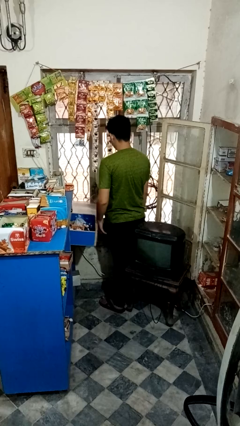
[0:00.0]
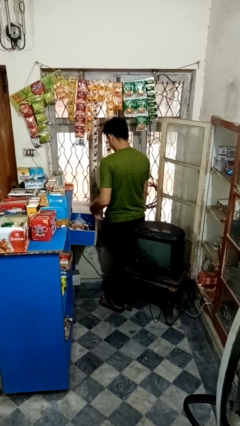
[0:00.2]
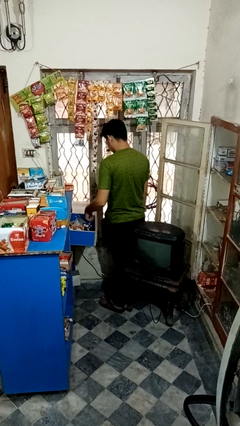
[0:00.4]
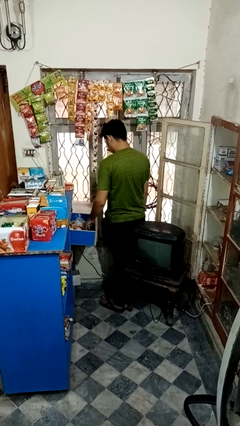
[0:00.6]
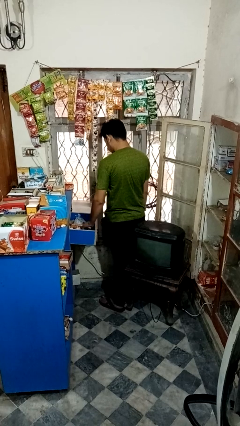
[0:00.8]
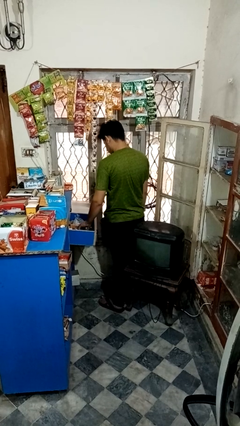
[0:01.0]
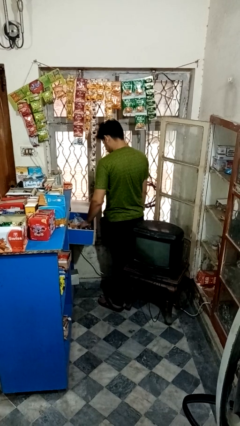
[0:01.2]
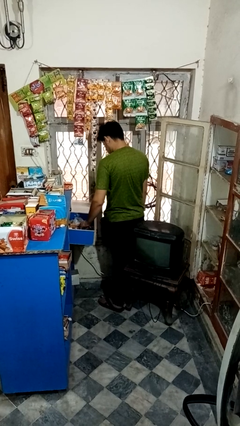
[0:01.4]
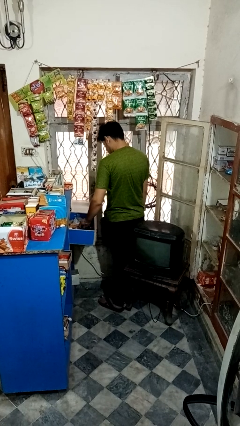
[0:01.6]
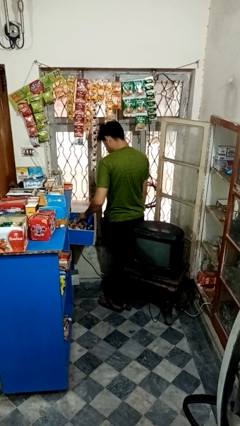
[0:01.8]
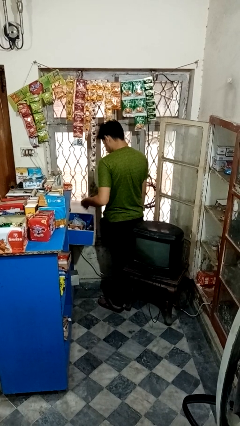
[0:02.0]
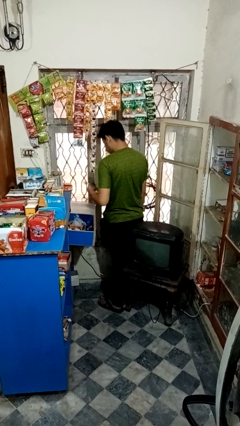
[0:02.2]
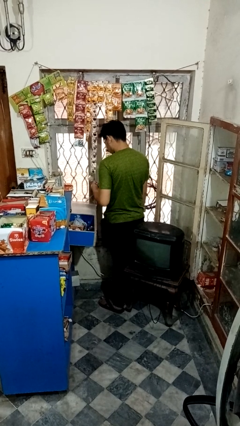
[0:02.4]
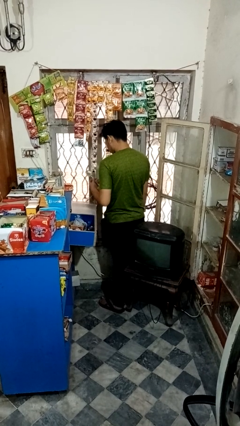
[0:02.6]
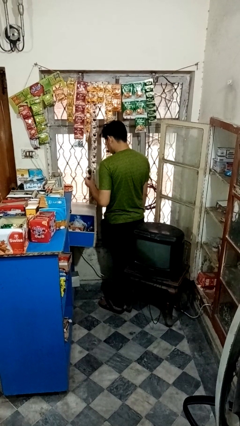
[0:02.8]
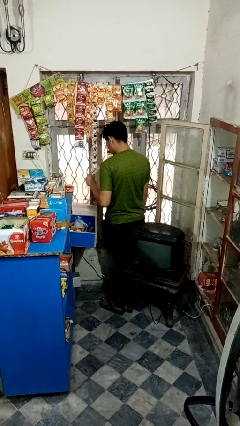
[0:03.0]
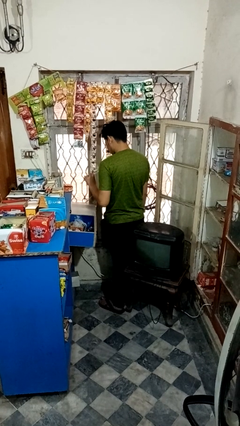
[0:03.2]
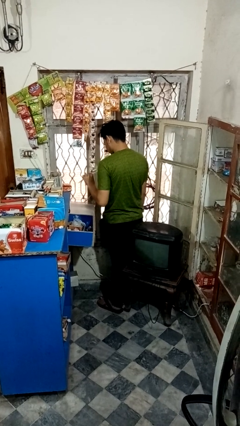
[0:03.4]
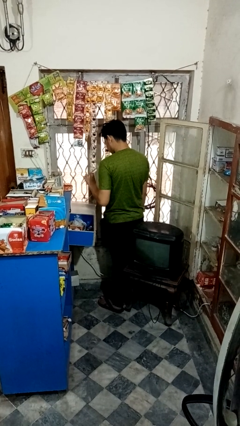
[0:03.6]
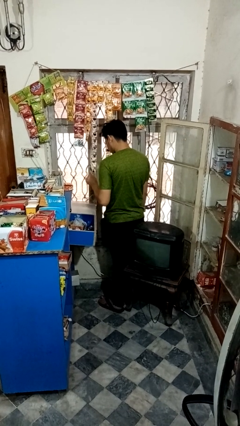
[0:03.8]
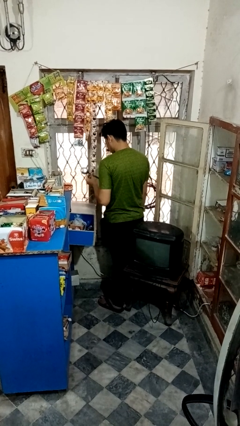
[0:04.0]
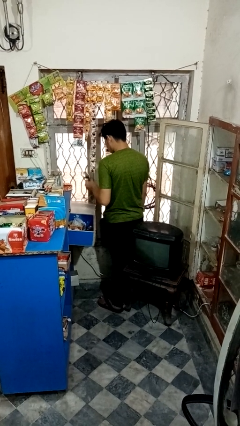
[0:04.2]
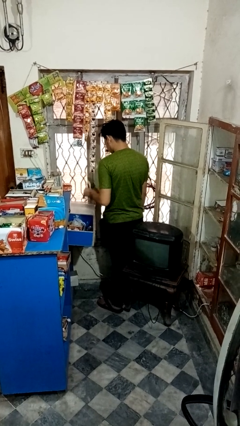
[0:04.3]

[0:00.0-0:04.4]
person searches in kitchen drawer

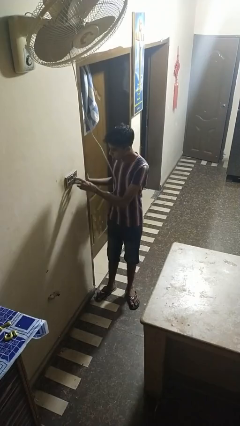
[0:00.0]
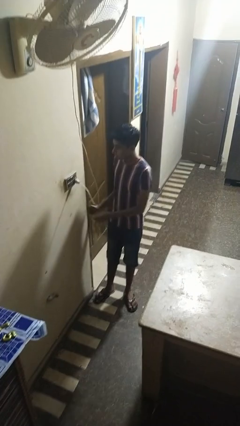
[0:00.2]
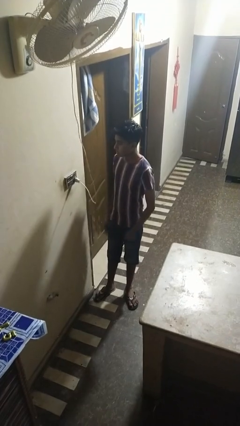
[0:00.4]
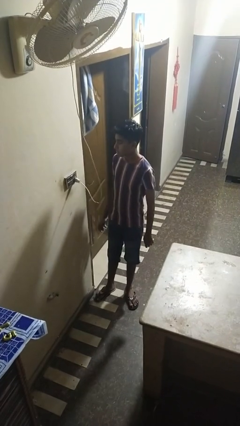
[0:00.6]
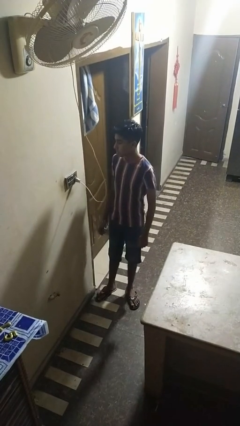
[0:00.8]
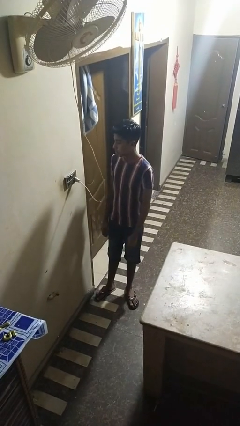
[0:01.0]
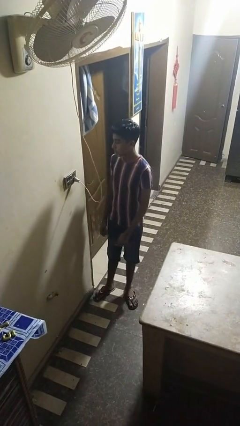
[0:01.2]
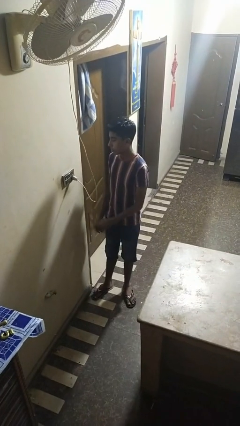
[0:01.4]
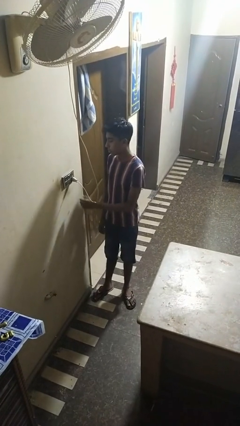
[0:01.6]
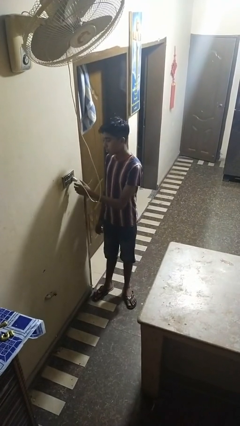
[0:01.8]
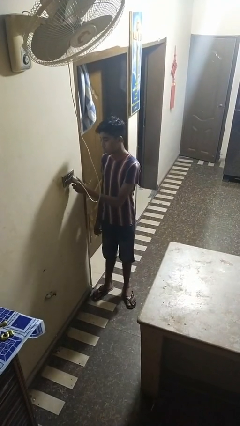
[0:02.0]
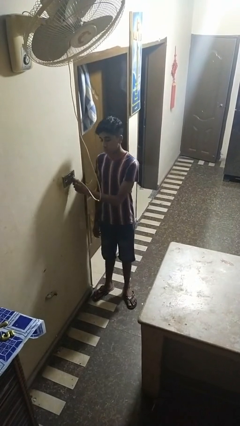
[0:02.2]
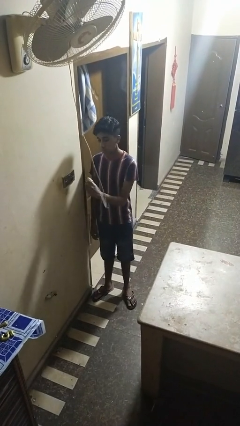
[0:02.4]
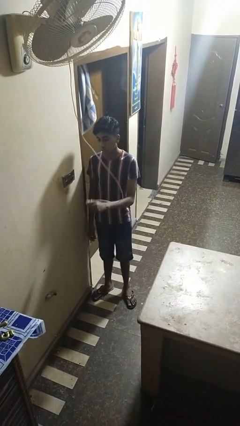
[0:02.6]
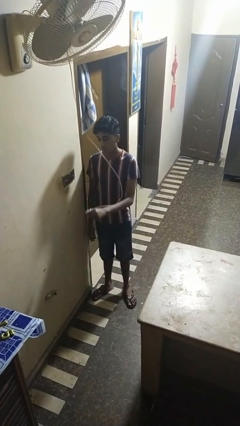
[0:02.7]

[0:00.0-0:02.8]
person unplugs from electrical socket

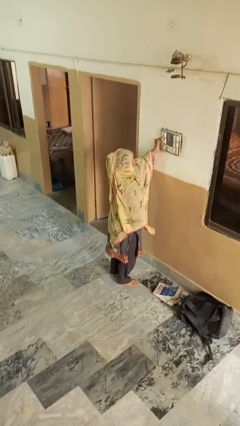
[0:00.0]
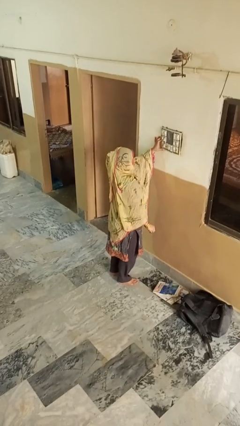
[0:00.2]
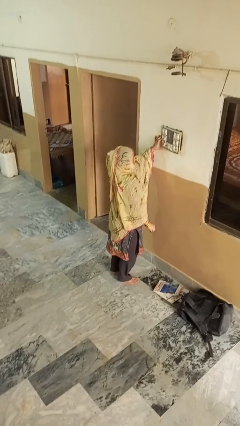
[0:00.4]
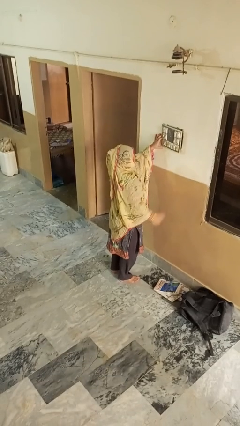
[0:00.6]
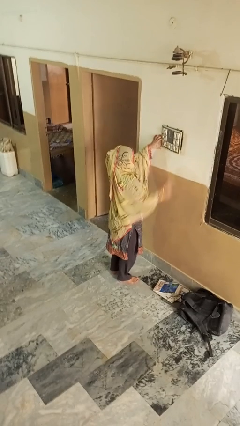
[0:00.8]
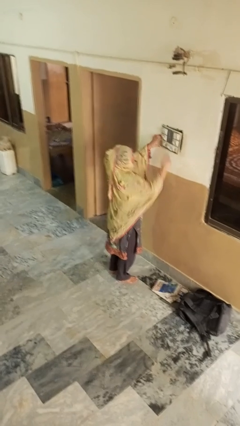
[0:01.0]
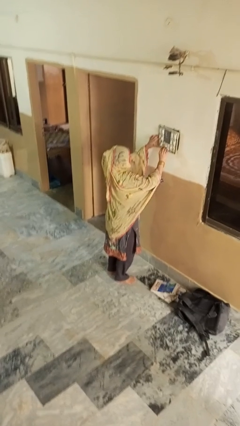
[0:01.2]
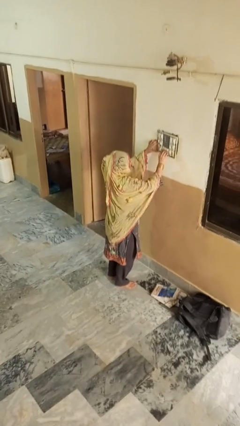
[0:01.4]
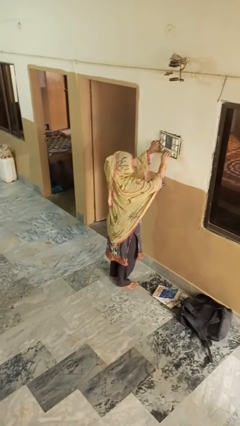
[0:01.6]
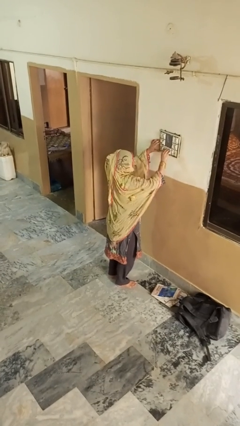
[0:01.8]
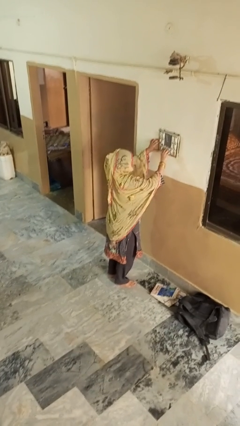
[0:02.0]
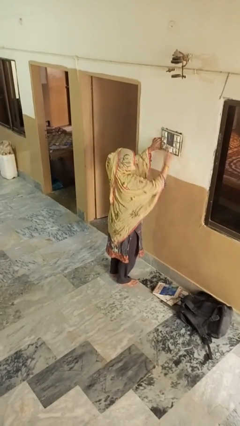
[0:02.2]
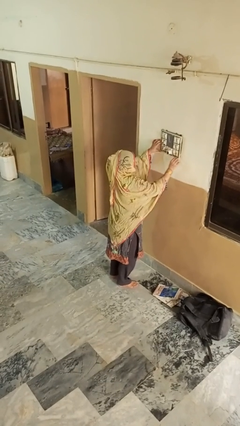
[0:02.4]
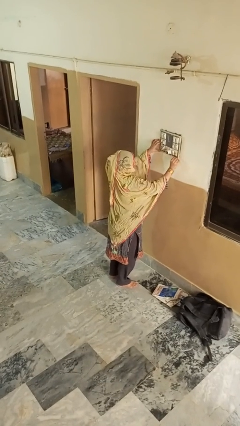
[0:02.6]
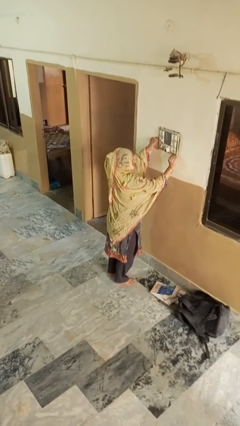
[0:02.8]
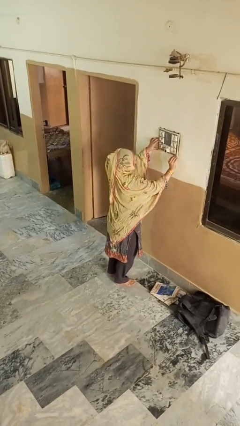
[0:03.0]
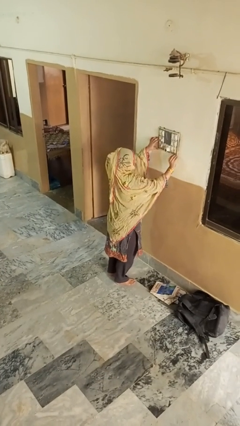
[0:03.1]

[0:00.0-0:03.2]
person plugs into electrical socket

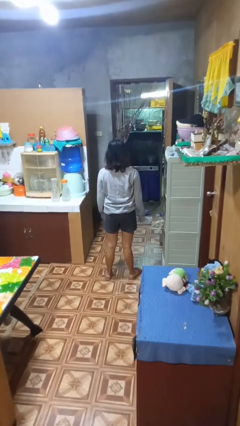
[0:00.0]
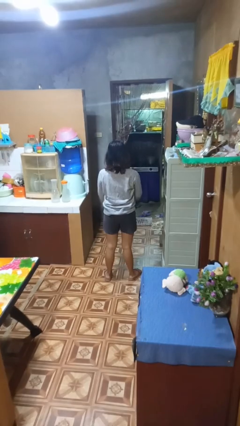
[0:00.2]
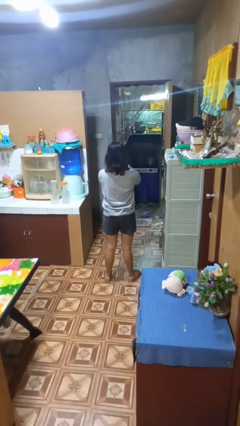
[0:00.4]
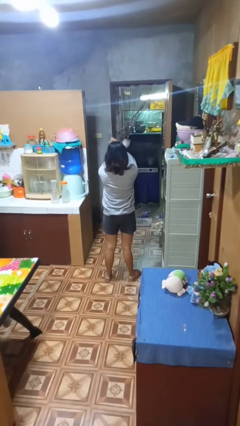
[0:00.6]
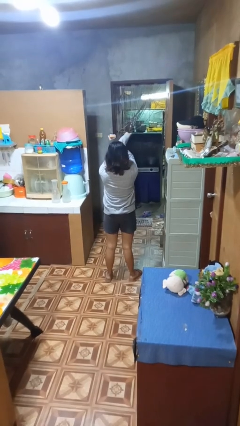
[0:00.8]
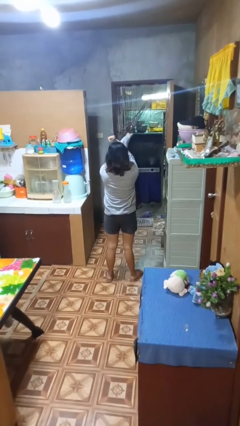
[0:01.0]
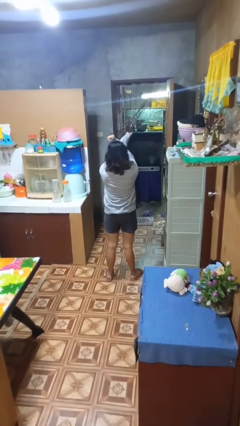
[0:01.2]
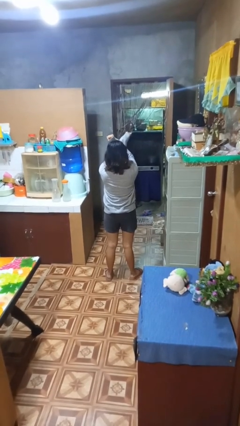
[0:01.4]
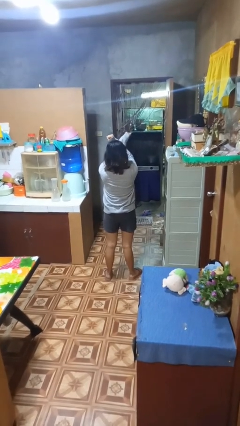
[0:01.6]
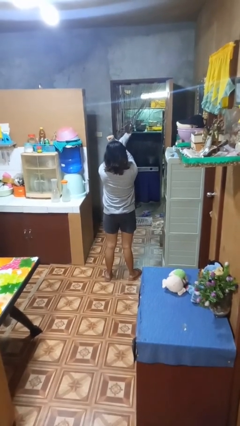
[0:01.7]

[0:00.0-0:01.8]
person gestures arms x

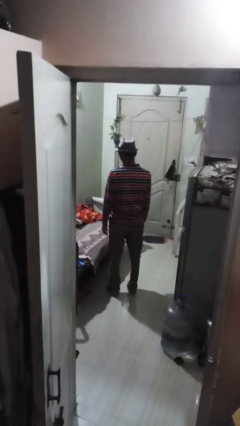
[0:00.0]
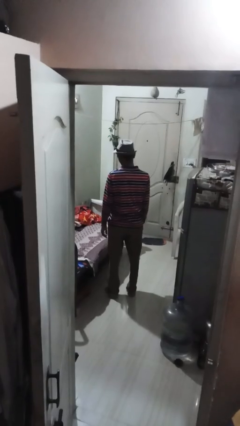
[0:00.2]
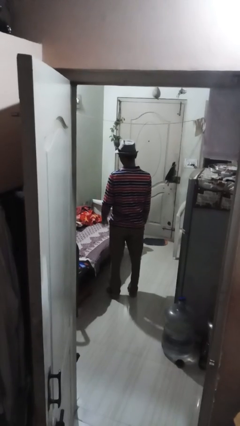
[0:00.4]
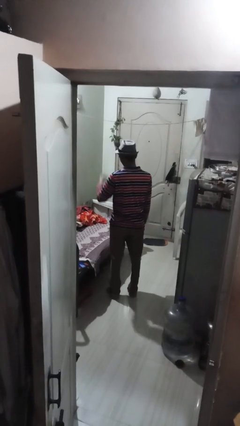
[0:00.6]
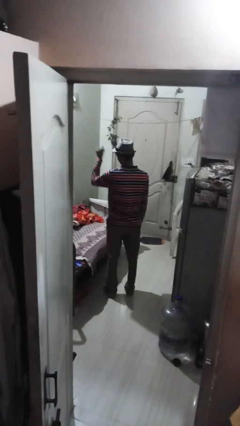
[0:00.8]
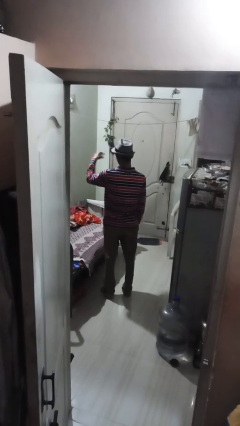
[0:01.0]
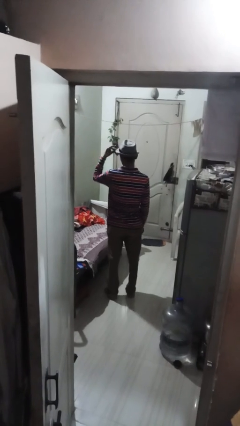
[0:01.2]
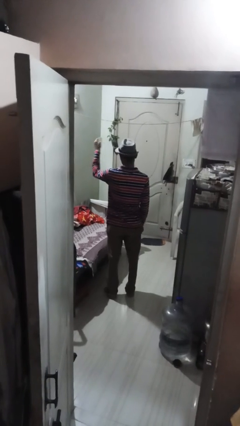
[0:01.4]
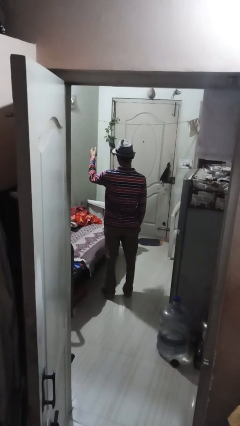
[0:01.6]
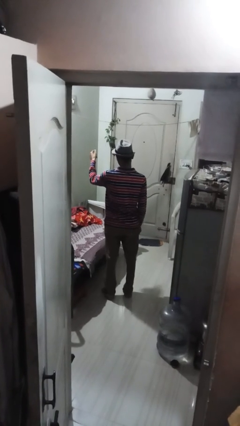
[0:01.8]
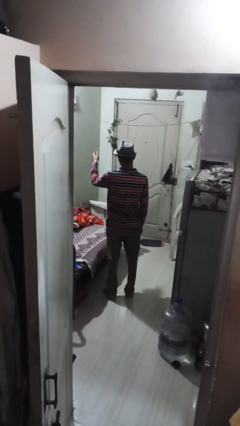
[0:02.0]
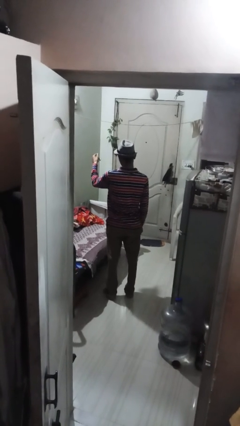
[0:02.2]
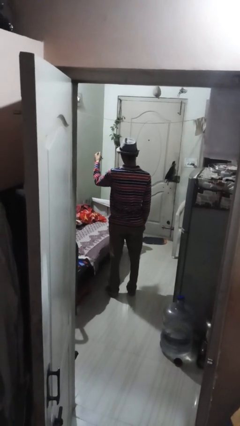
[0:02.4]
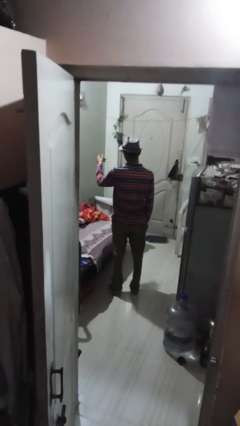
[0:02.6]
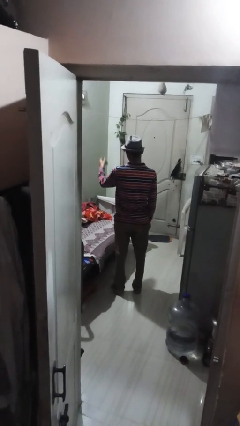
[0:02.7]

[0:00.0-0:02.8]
person snaps fingers

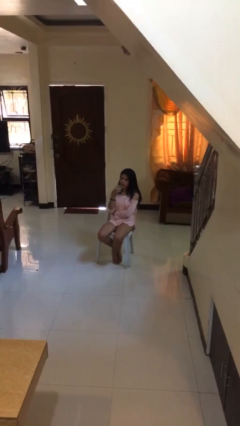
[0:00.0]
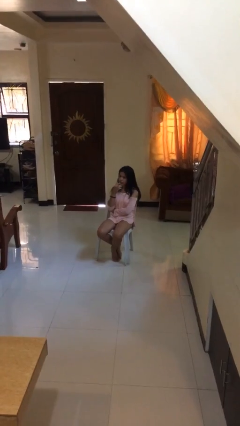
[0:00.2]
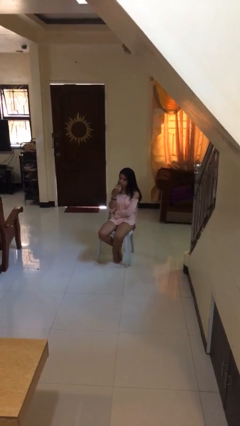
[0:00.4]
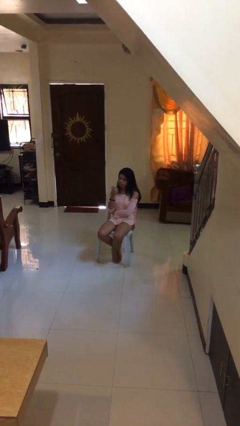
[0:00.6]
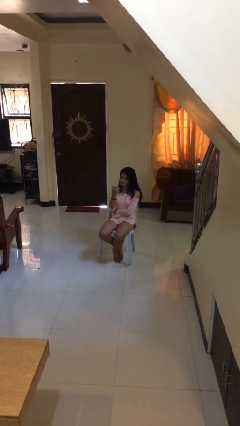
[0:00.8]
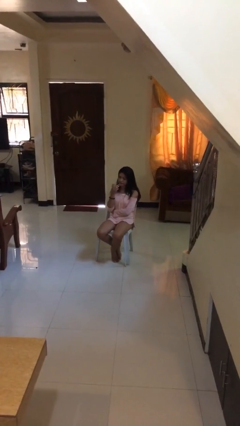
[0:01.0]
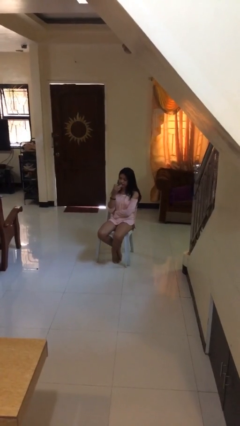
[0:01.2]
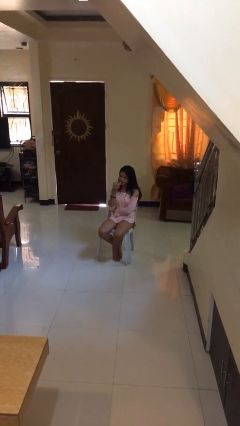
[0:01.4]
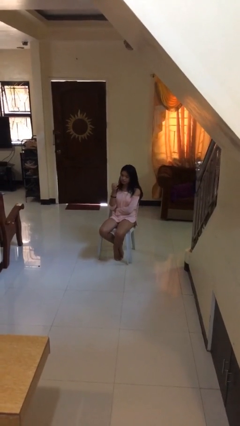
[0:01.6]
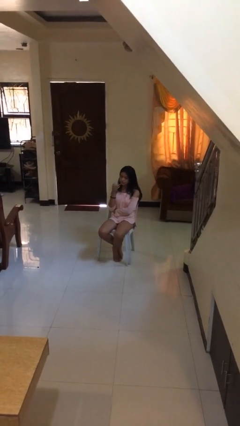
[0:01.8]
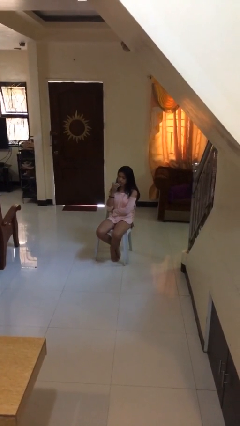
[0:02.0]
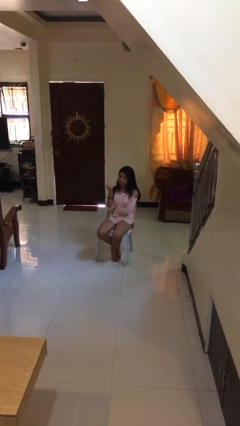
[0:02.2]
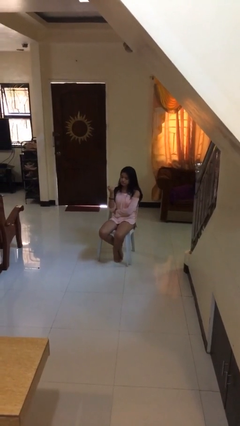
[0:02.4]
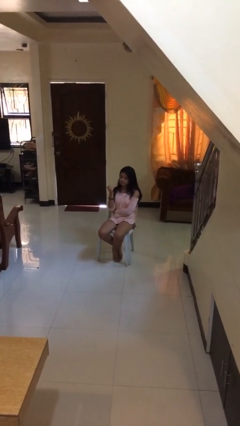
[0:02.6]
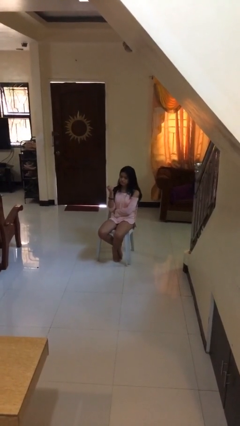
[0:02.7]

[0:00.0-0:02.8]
person licks fingers
